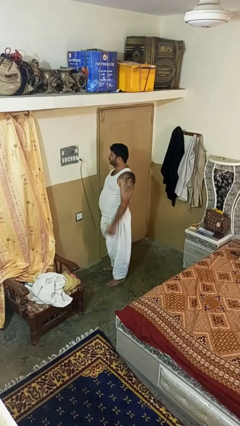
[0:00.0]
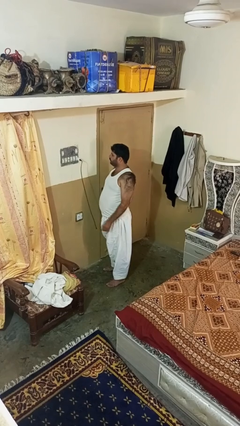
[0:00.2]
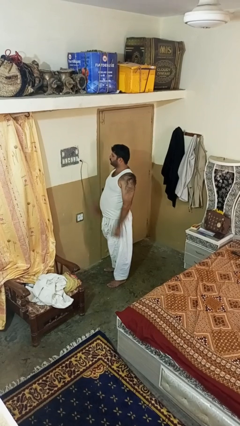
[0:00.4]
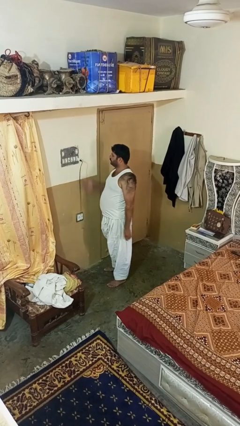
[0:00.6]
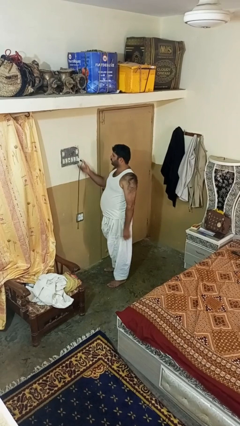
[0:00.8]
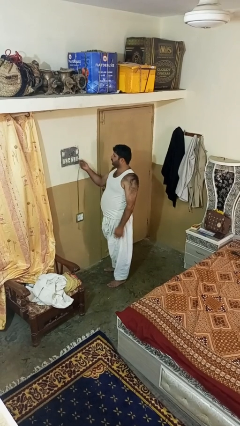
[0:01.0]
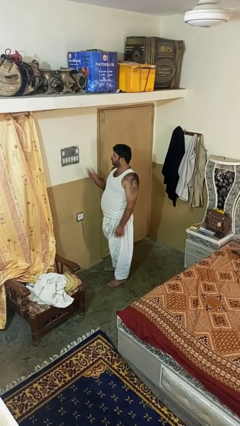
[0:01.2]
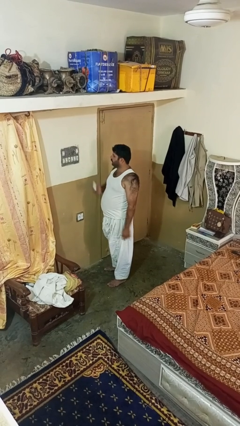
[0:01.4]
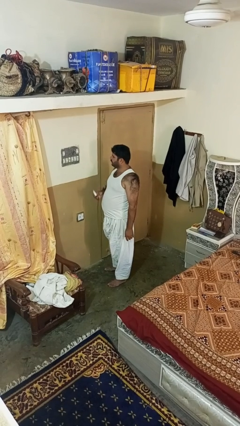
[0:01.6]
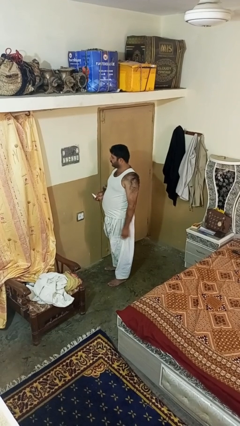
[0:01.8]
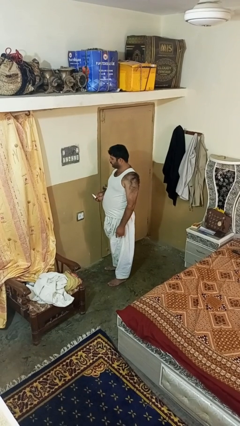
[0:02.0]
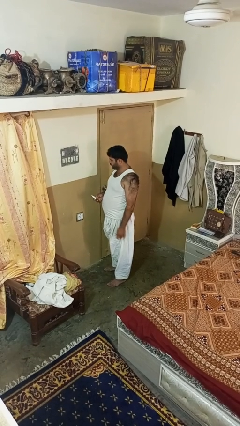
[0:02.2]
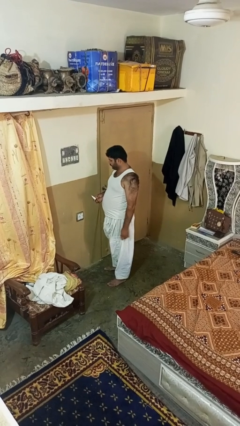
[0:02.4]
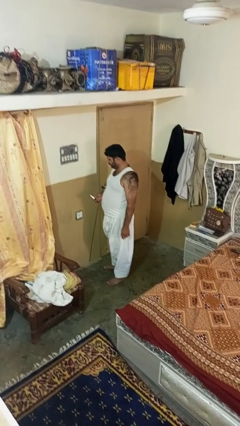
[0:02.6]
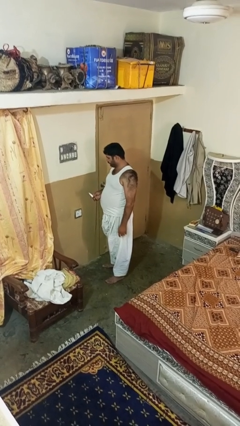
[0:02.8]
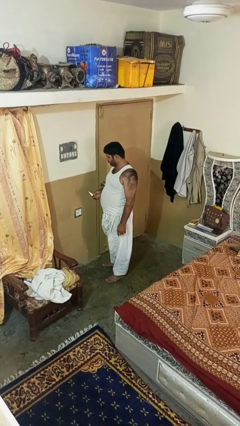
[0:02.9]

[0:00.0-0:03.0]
person unplugs from electrical socket

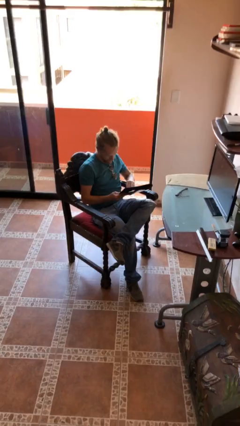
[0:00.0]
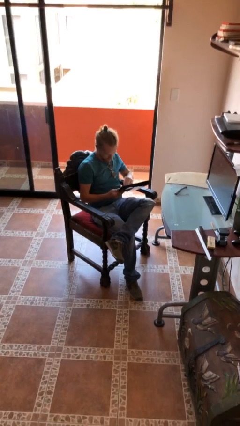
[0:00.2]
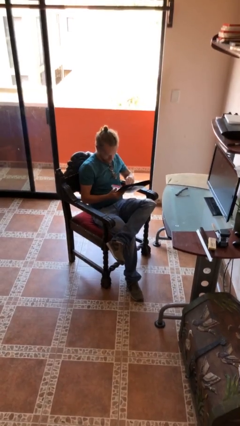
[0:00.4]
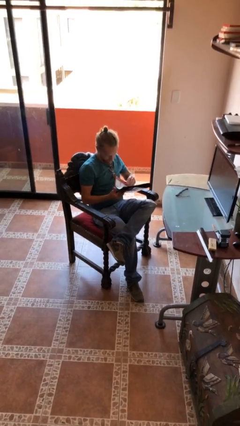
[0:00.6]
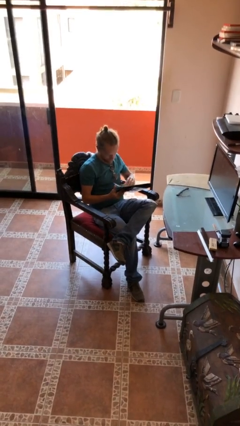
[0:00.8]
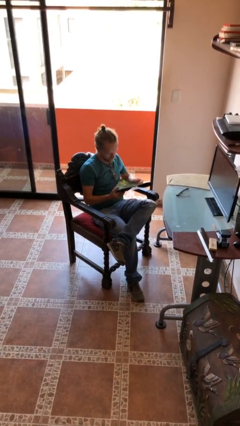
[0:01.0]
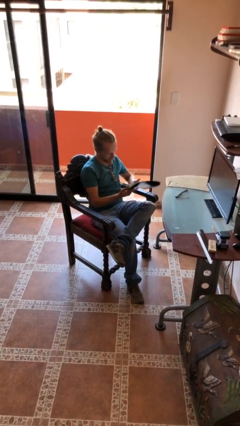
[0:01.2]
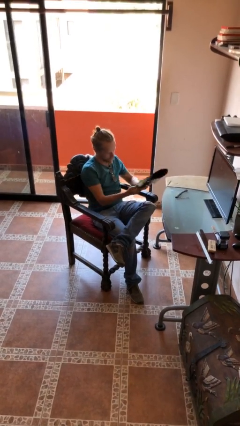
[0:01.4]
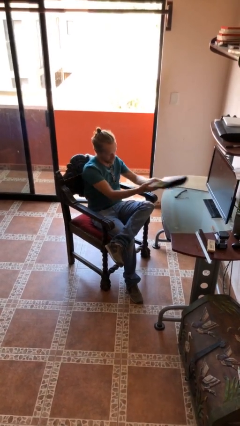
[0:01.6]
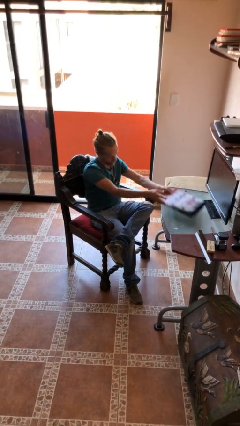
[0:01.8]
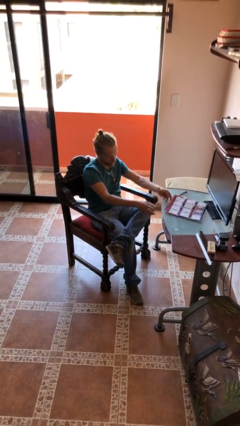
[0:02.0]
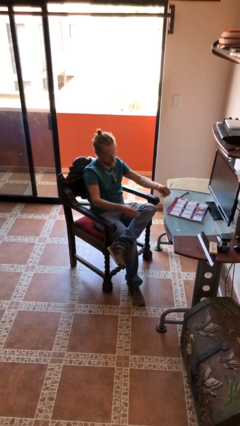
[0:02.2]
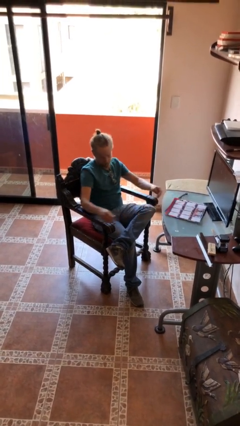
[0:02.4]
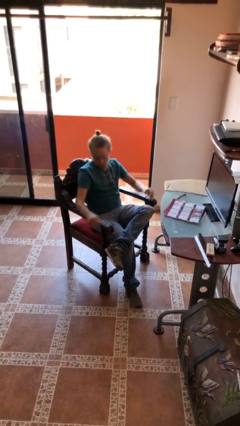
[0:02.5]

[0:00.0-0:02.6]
person puts down object on table

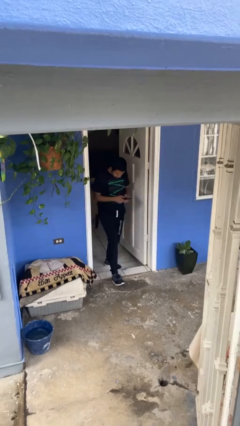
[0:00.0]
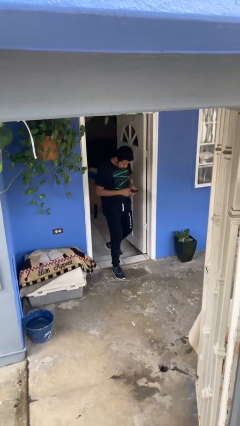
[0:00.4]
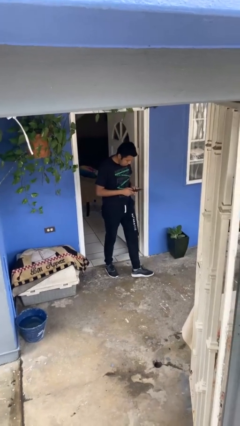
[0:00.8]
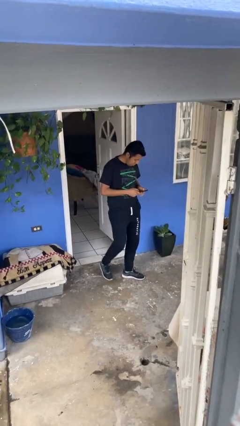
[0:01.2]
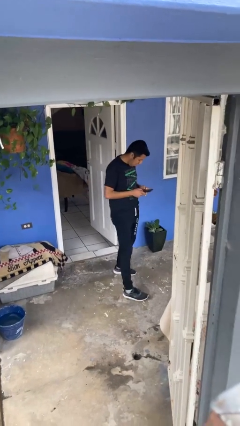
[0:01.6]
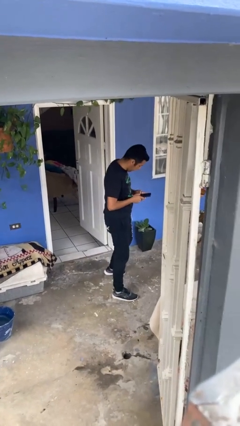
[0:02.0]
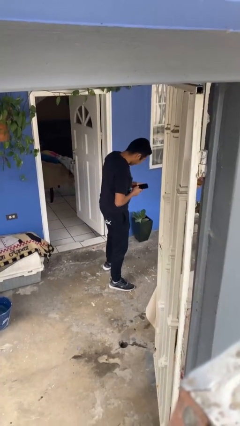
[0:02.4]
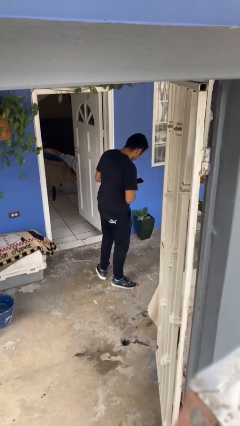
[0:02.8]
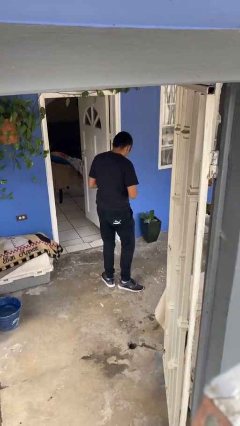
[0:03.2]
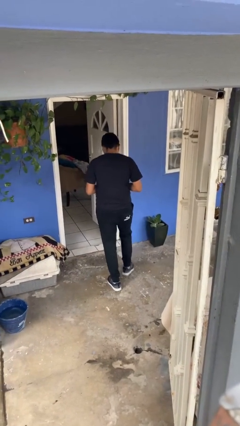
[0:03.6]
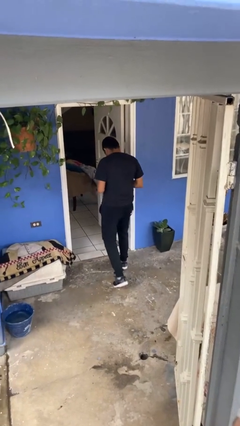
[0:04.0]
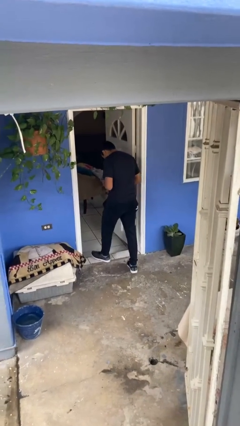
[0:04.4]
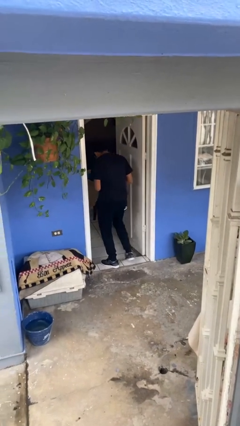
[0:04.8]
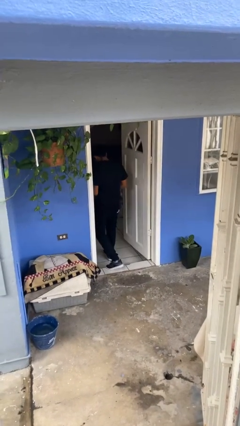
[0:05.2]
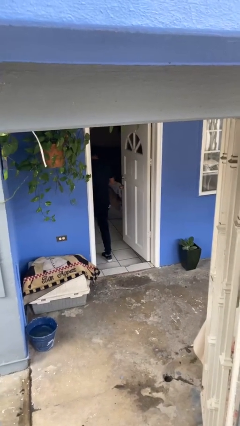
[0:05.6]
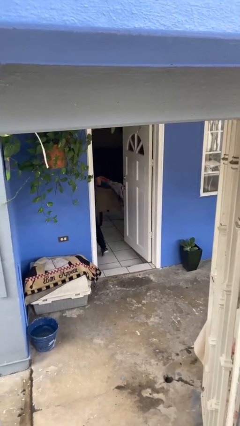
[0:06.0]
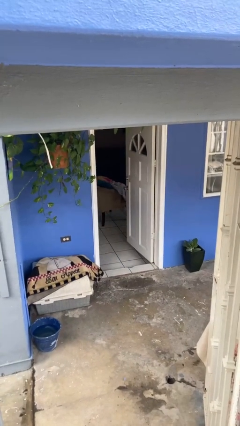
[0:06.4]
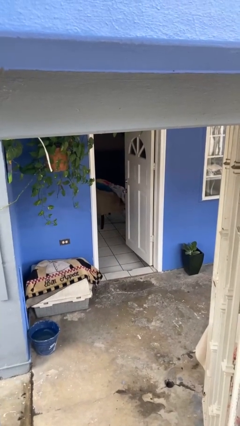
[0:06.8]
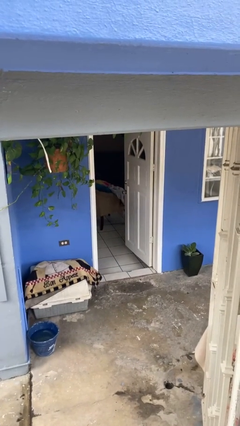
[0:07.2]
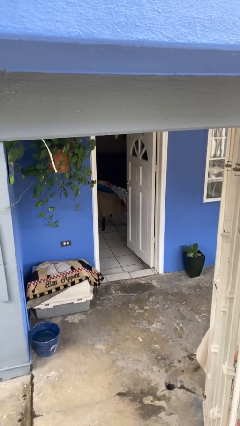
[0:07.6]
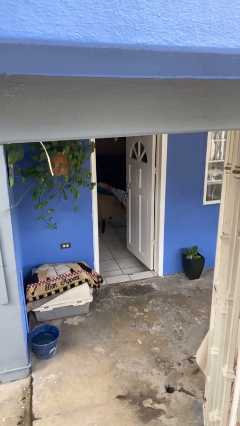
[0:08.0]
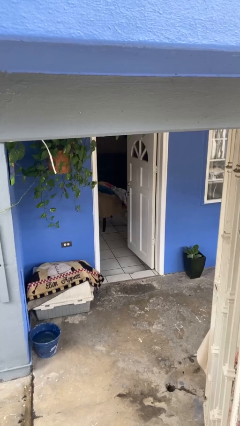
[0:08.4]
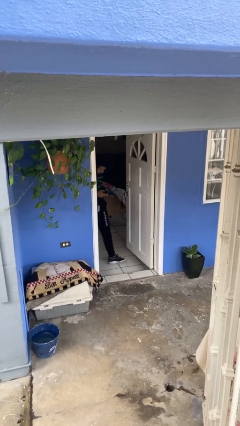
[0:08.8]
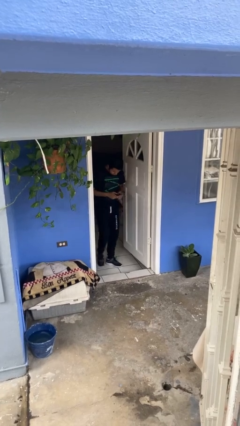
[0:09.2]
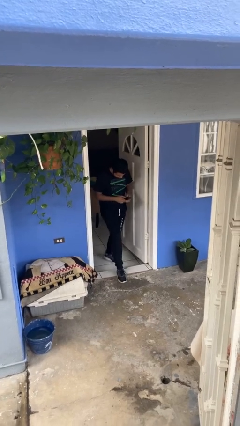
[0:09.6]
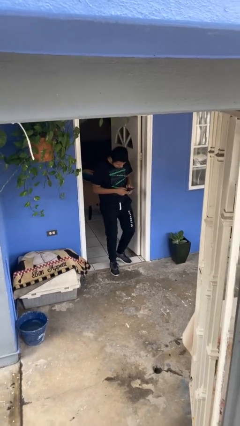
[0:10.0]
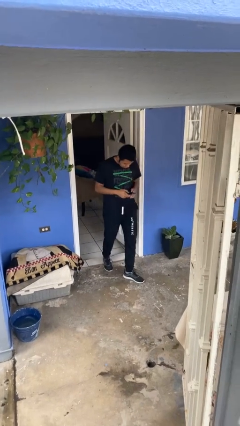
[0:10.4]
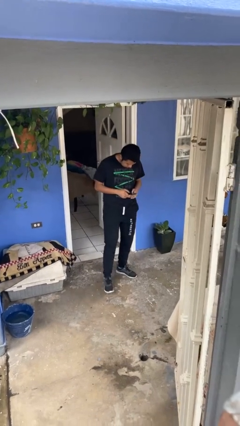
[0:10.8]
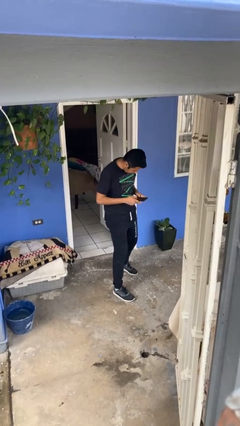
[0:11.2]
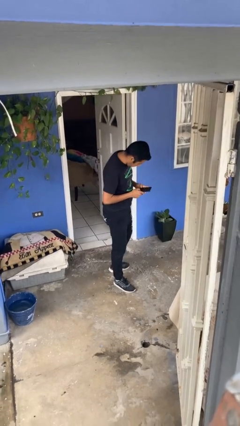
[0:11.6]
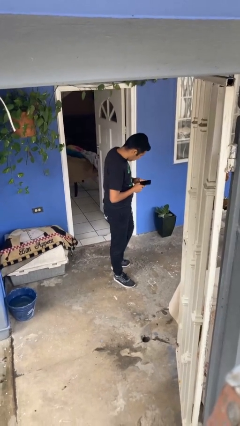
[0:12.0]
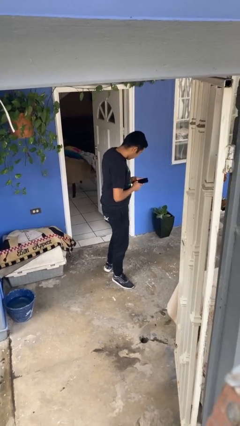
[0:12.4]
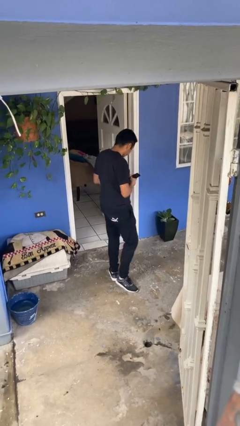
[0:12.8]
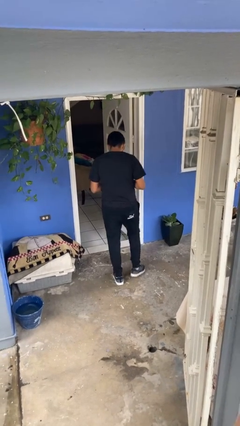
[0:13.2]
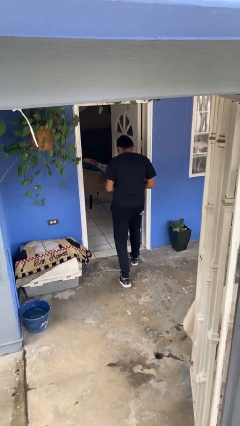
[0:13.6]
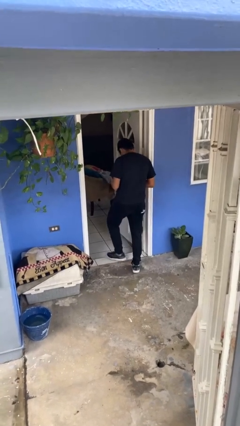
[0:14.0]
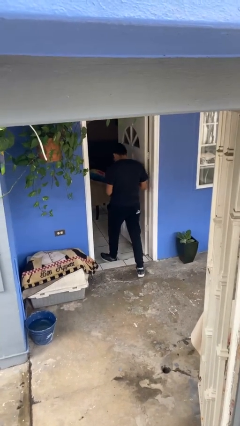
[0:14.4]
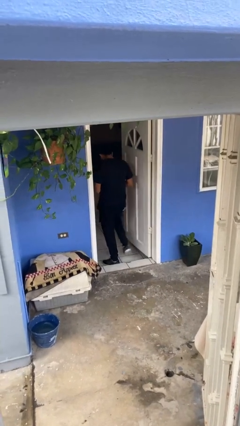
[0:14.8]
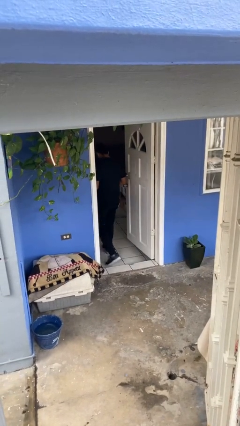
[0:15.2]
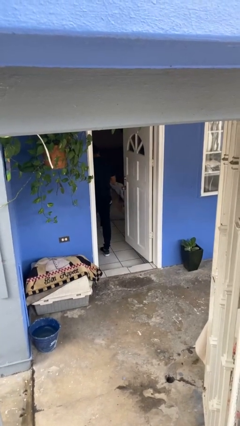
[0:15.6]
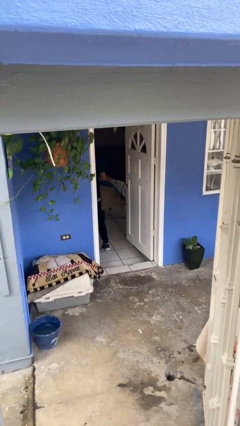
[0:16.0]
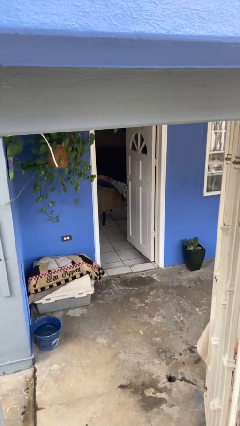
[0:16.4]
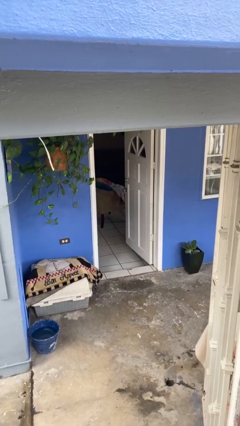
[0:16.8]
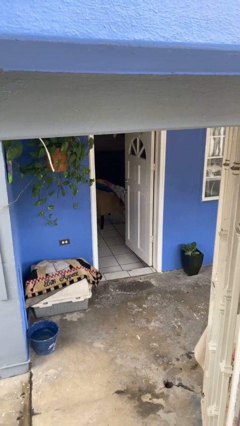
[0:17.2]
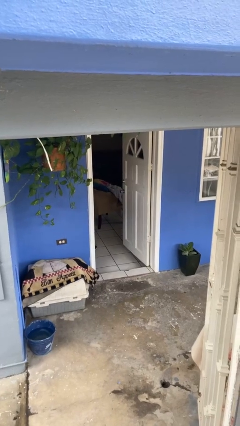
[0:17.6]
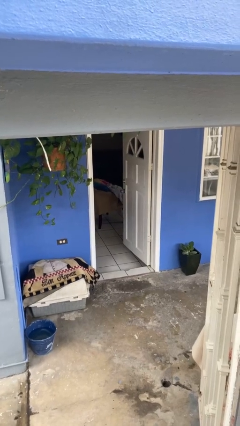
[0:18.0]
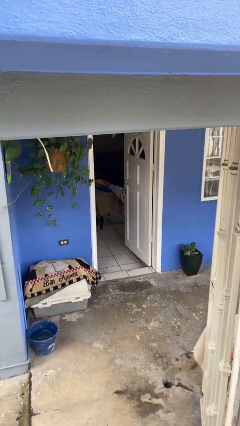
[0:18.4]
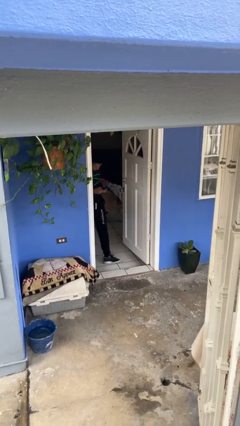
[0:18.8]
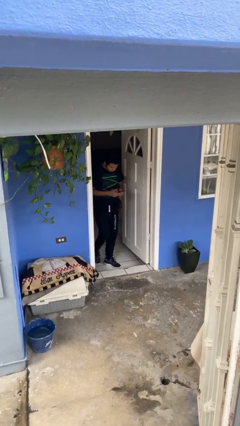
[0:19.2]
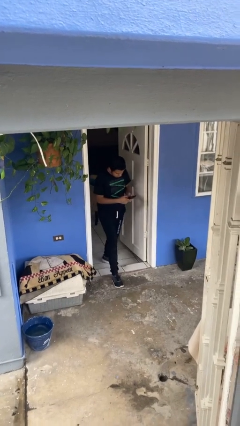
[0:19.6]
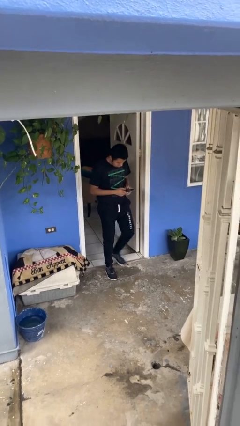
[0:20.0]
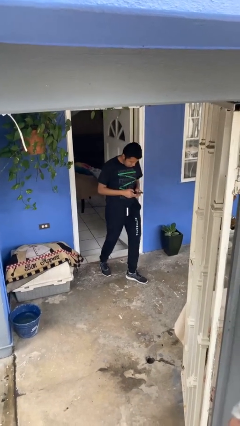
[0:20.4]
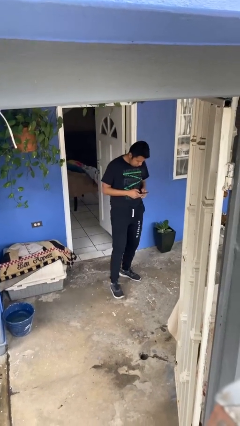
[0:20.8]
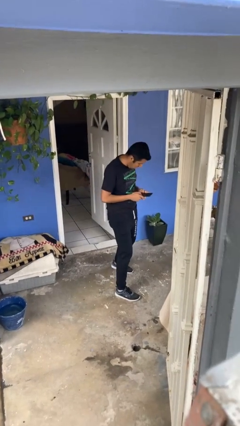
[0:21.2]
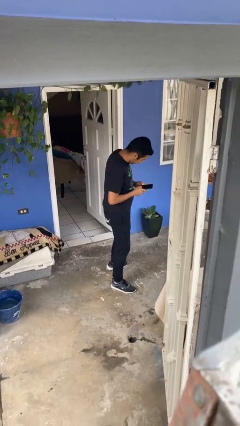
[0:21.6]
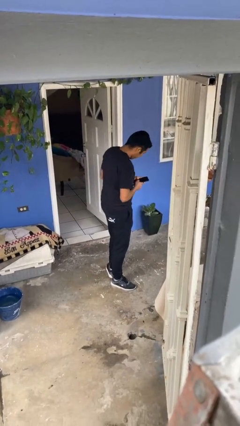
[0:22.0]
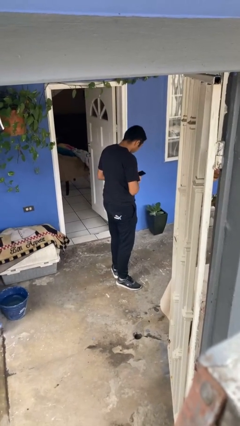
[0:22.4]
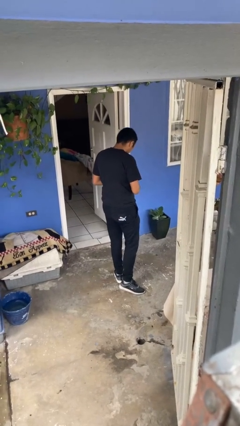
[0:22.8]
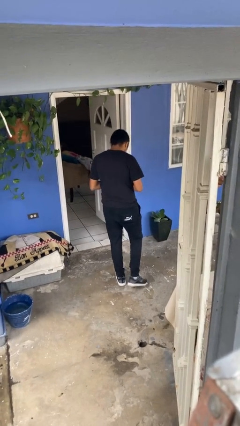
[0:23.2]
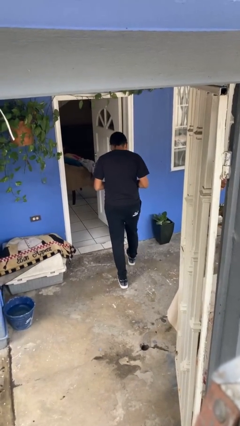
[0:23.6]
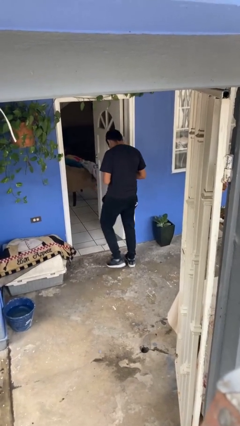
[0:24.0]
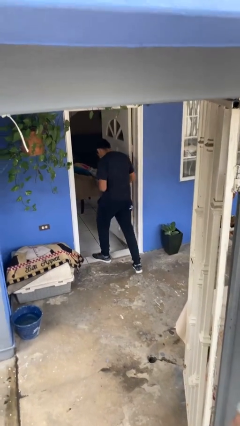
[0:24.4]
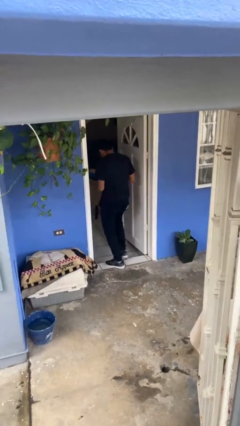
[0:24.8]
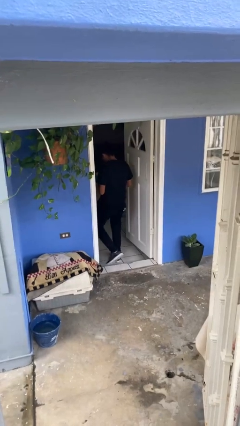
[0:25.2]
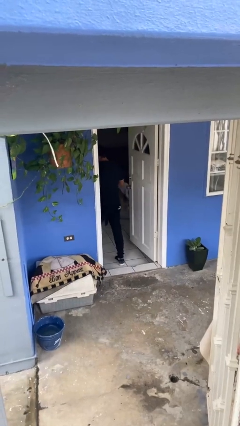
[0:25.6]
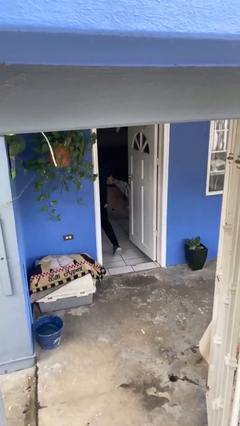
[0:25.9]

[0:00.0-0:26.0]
person texts on phone
